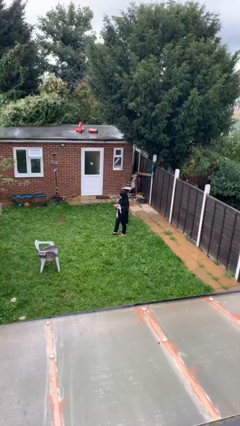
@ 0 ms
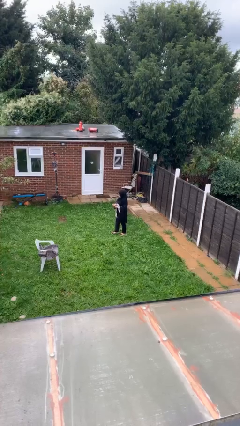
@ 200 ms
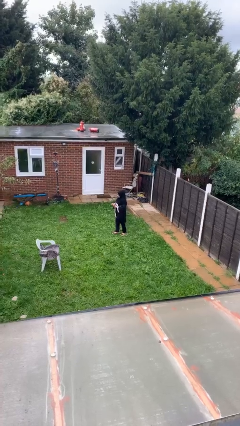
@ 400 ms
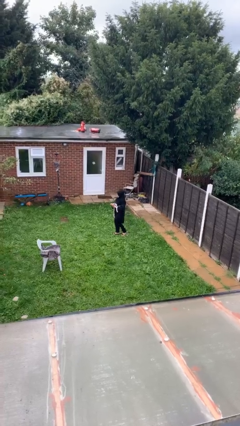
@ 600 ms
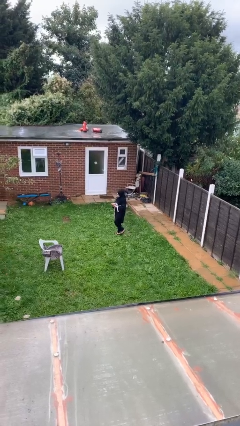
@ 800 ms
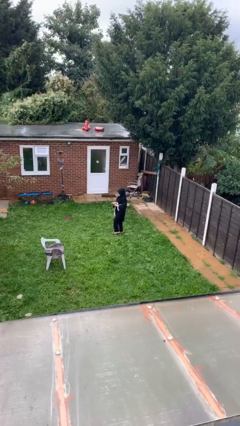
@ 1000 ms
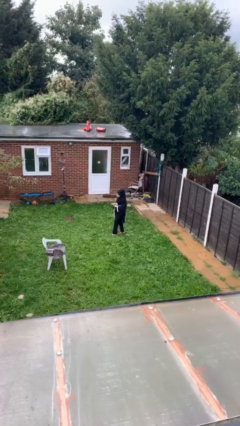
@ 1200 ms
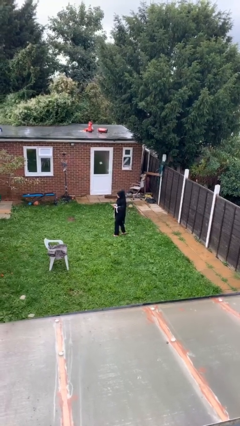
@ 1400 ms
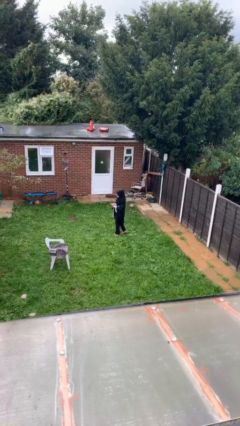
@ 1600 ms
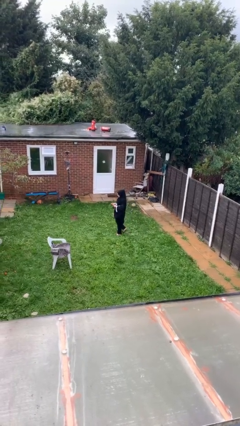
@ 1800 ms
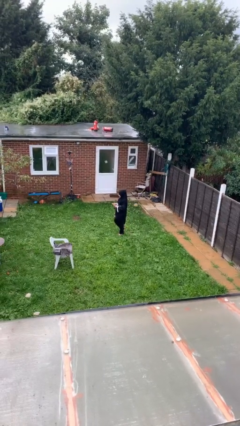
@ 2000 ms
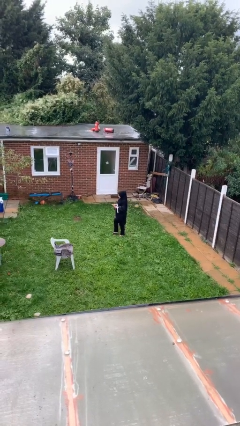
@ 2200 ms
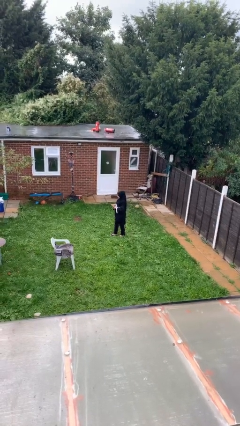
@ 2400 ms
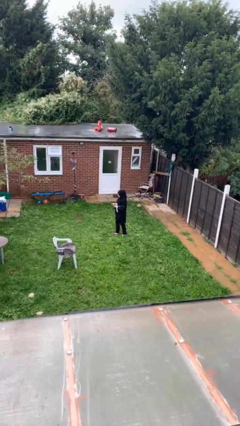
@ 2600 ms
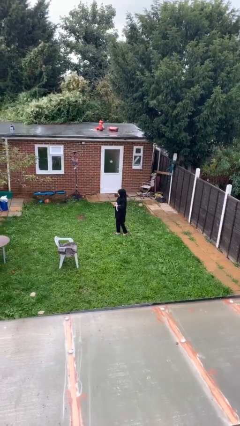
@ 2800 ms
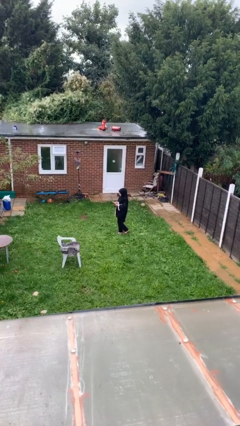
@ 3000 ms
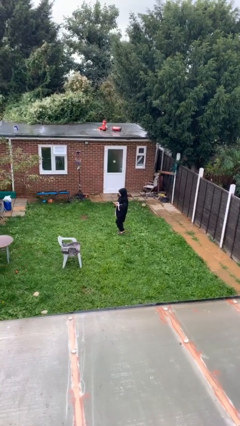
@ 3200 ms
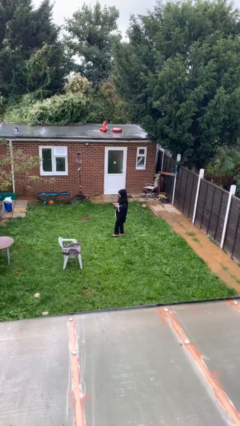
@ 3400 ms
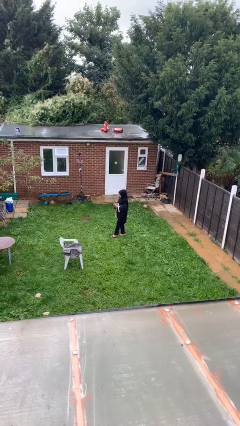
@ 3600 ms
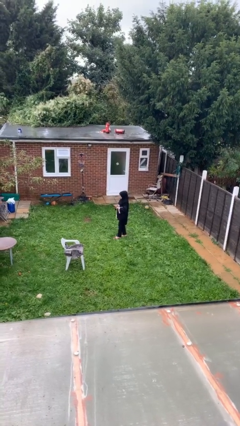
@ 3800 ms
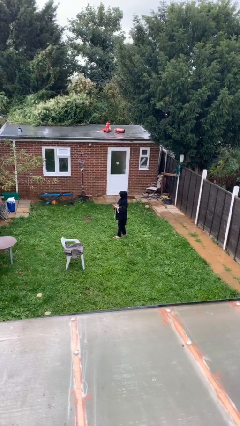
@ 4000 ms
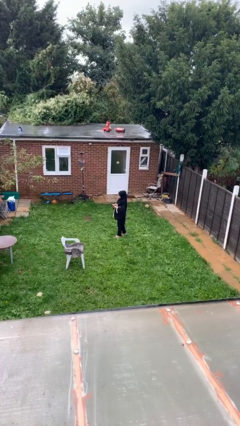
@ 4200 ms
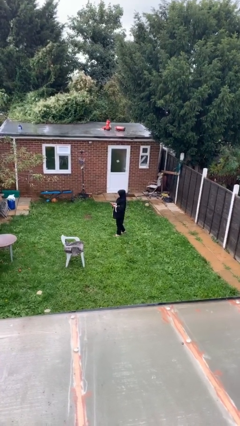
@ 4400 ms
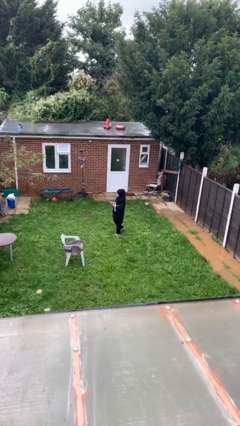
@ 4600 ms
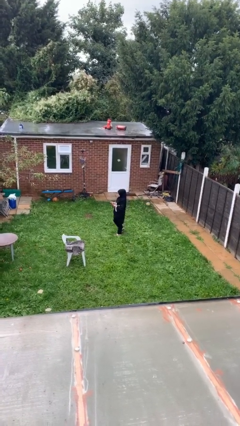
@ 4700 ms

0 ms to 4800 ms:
person texts on phone

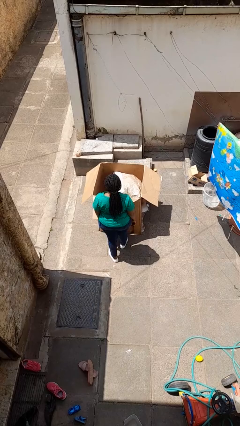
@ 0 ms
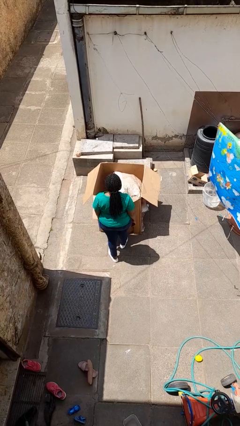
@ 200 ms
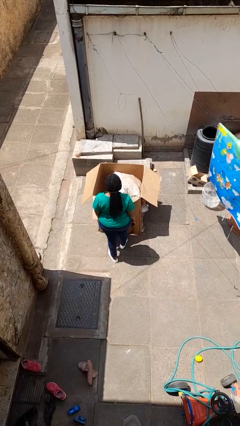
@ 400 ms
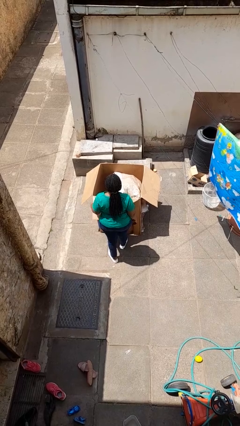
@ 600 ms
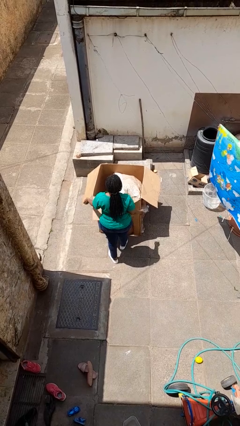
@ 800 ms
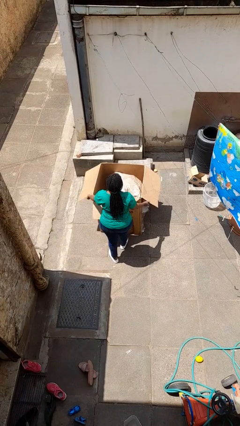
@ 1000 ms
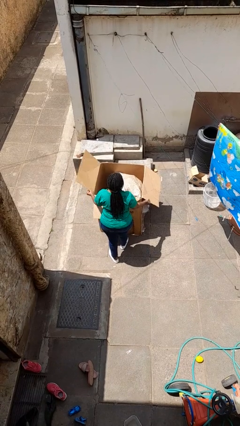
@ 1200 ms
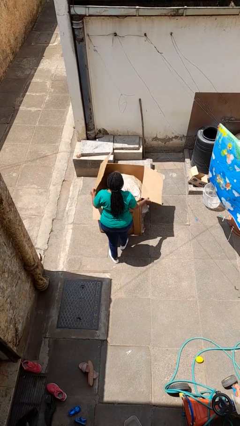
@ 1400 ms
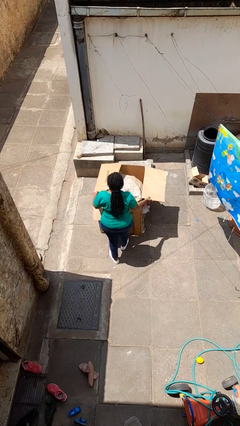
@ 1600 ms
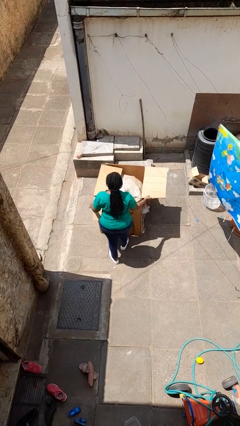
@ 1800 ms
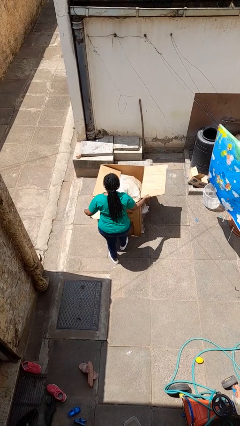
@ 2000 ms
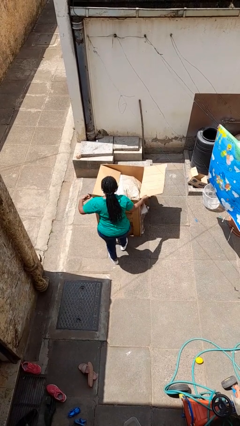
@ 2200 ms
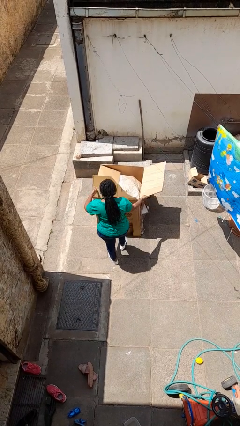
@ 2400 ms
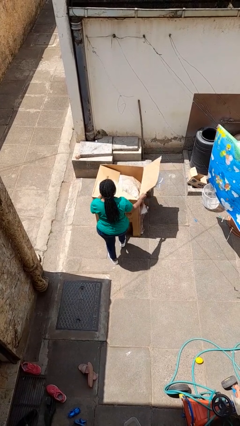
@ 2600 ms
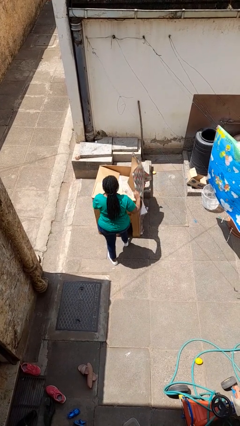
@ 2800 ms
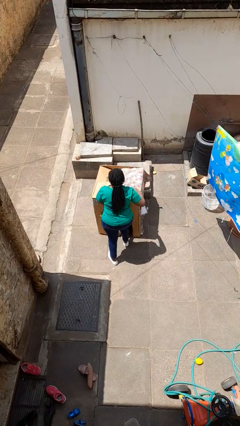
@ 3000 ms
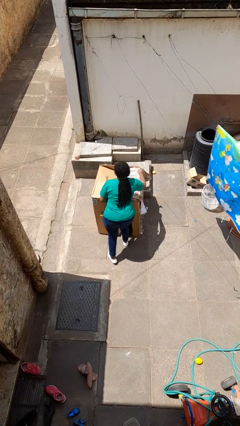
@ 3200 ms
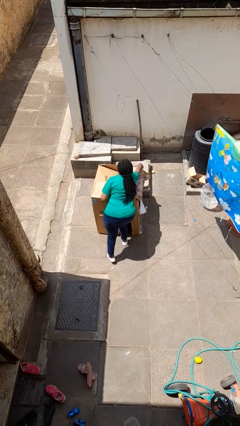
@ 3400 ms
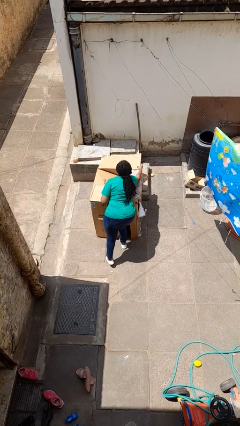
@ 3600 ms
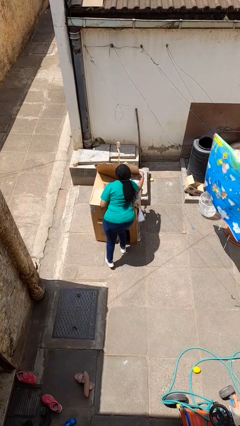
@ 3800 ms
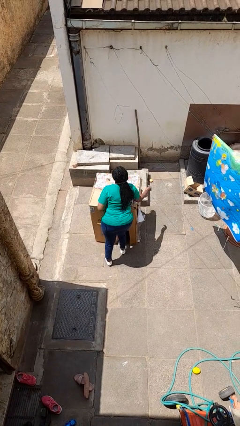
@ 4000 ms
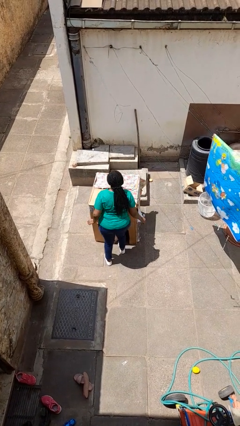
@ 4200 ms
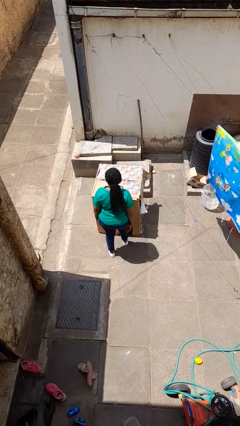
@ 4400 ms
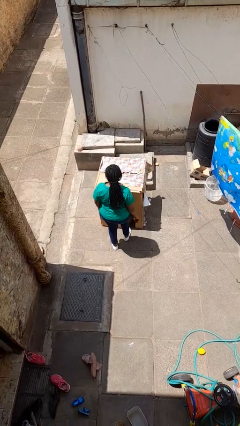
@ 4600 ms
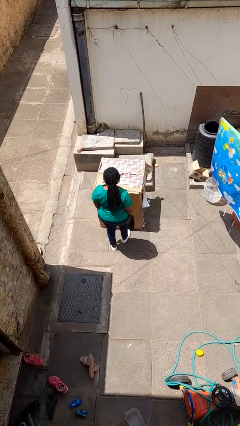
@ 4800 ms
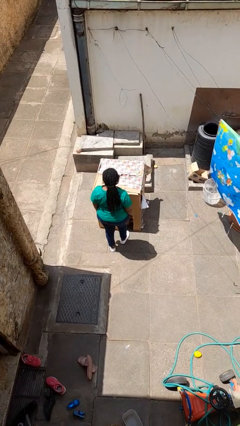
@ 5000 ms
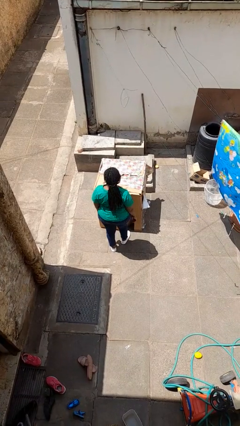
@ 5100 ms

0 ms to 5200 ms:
person closes box

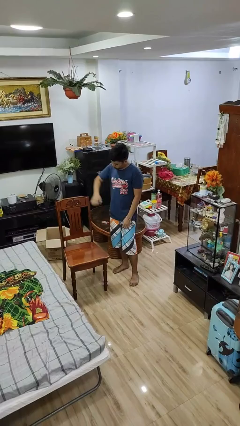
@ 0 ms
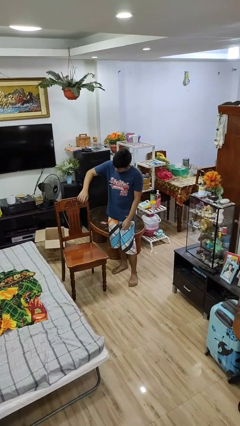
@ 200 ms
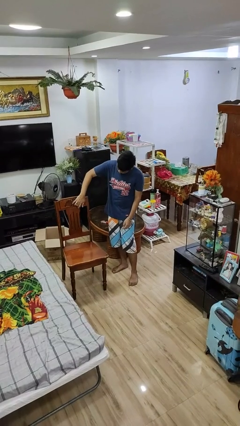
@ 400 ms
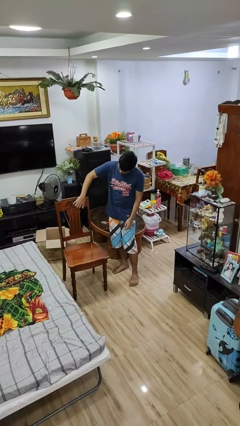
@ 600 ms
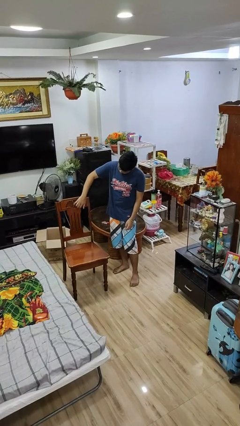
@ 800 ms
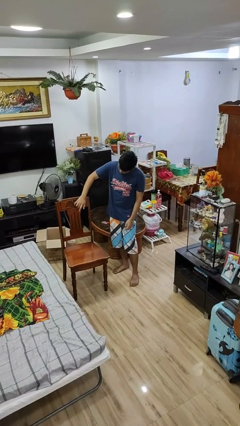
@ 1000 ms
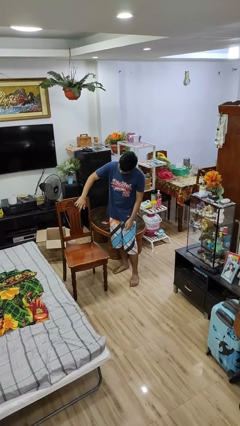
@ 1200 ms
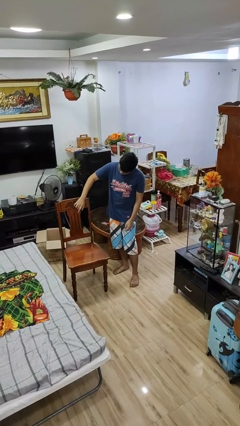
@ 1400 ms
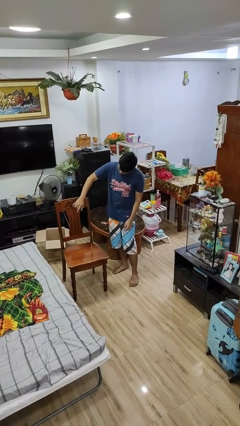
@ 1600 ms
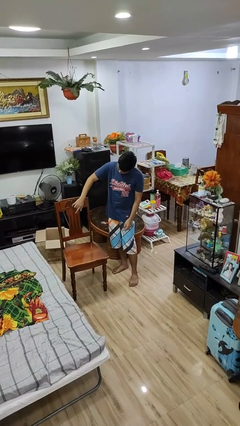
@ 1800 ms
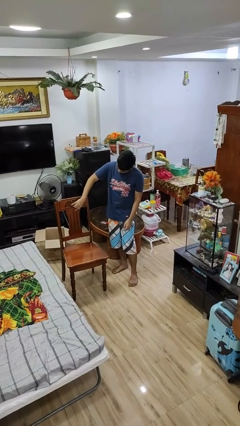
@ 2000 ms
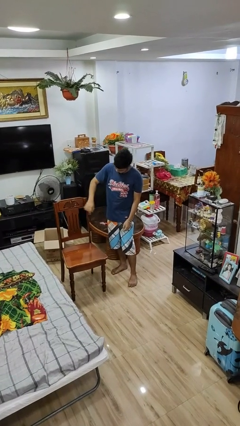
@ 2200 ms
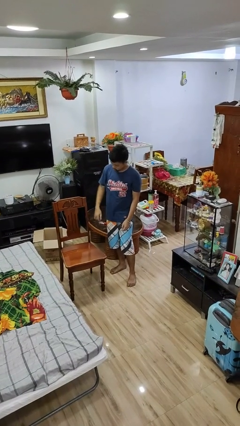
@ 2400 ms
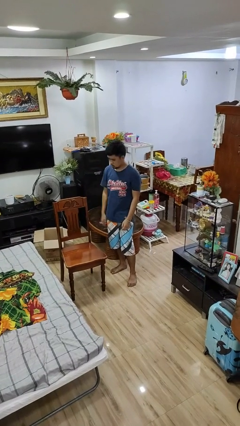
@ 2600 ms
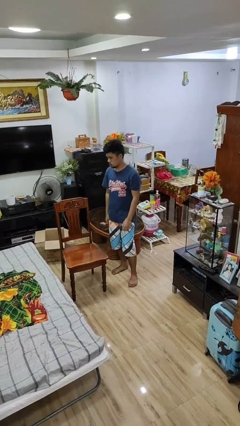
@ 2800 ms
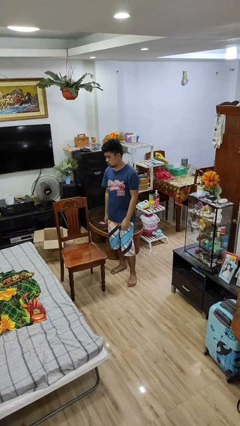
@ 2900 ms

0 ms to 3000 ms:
person taps object with finger

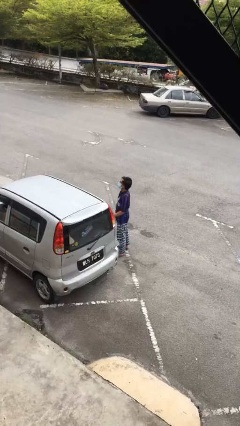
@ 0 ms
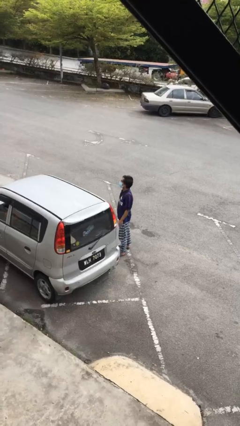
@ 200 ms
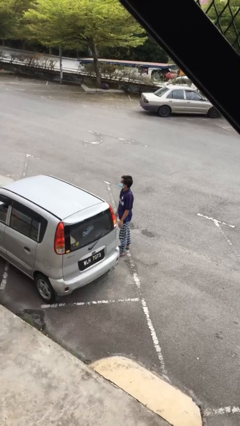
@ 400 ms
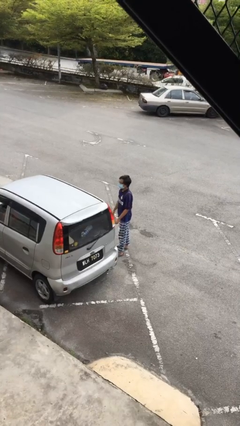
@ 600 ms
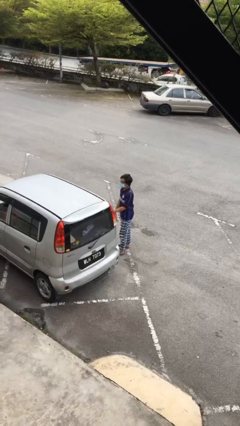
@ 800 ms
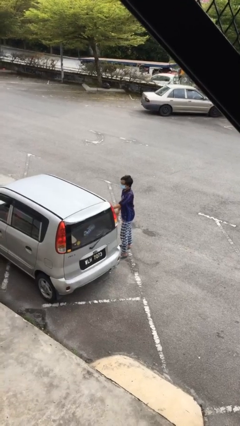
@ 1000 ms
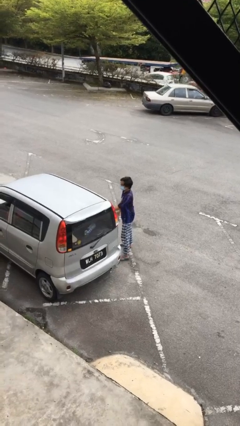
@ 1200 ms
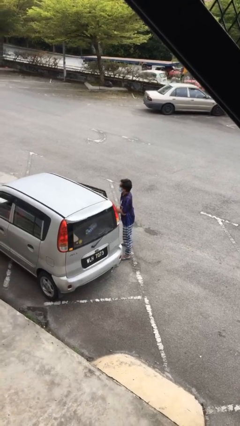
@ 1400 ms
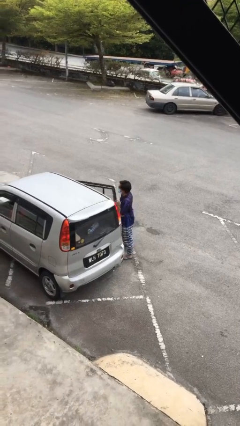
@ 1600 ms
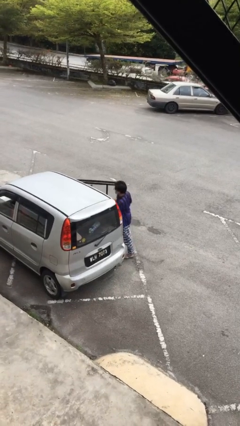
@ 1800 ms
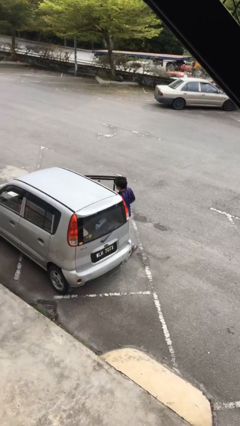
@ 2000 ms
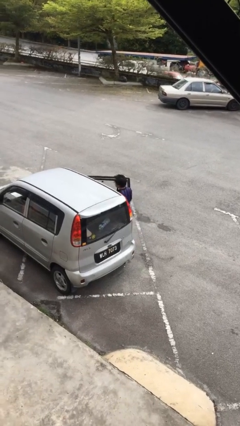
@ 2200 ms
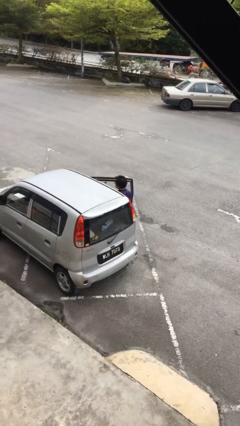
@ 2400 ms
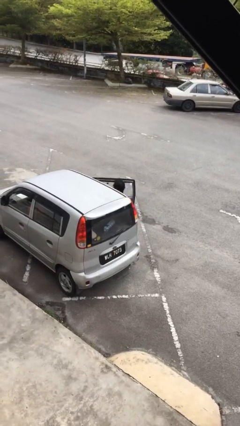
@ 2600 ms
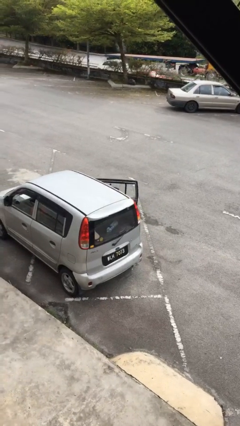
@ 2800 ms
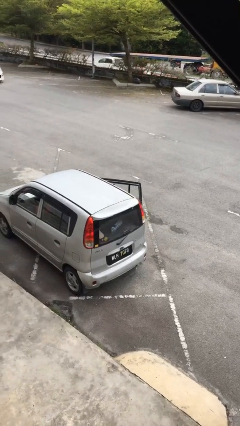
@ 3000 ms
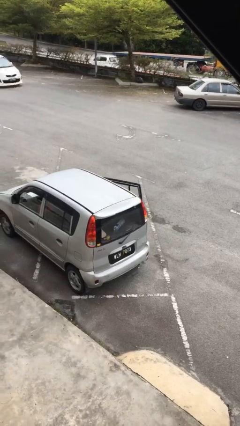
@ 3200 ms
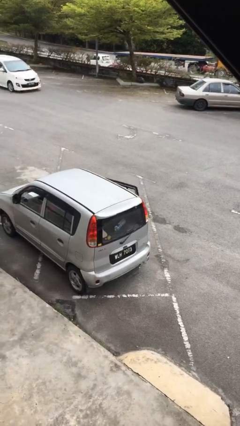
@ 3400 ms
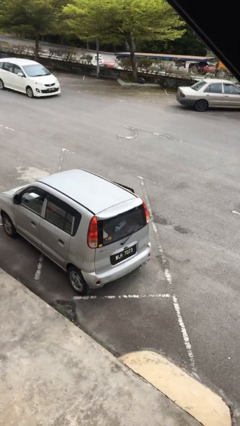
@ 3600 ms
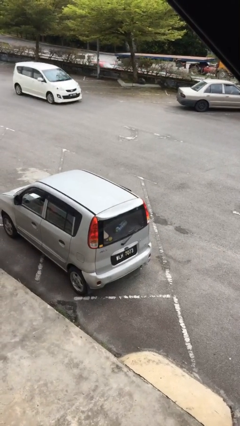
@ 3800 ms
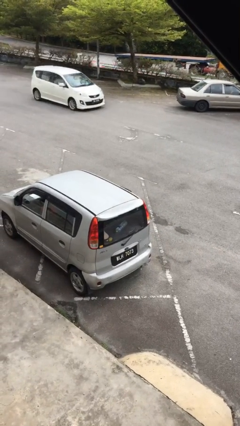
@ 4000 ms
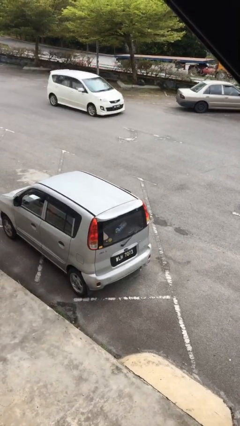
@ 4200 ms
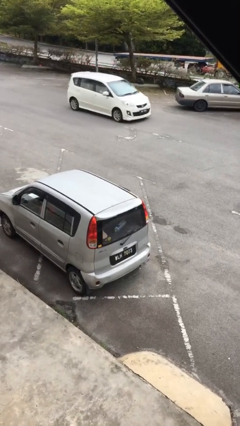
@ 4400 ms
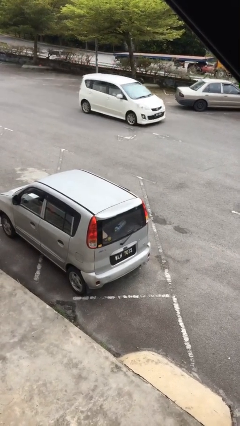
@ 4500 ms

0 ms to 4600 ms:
person enters car
